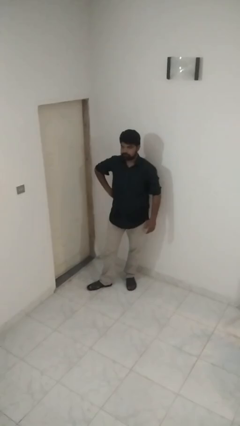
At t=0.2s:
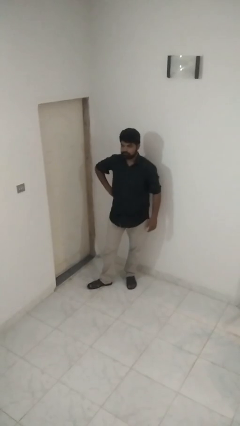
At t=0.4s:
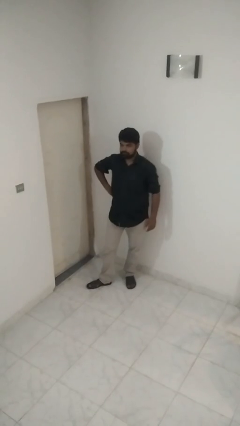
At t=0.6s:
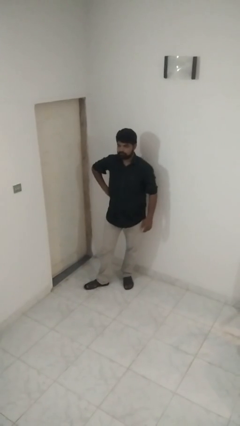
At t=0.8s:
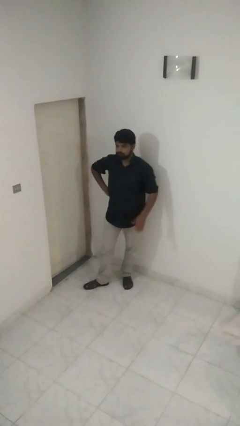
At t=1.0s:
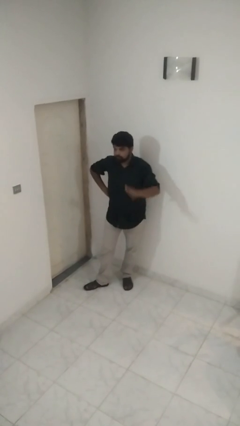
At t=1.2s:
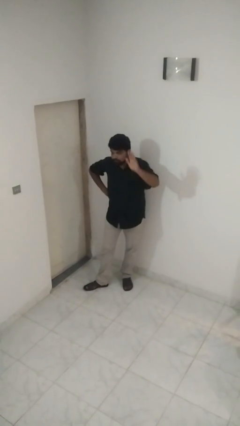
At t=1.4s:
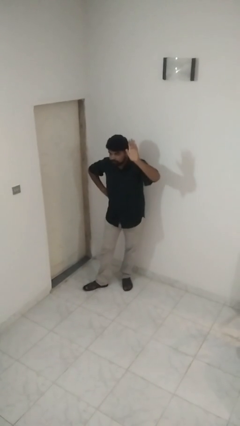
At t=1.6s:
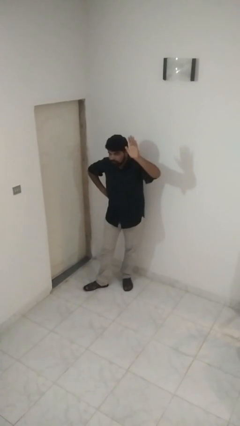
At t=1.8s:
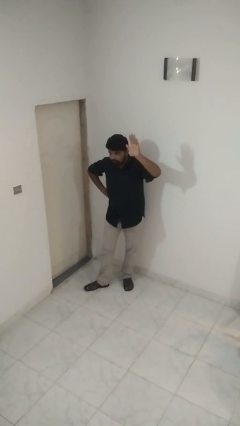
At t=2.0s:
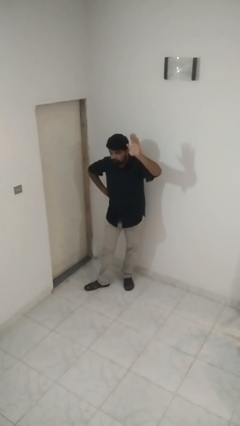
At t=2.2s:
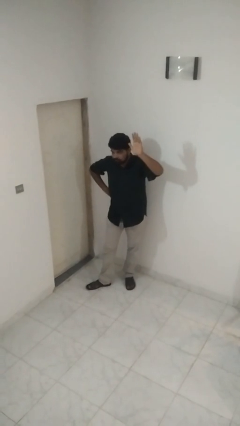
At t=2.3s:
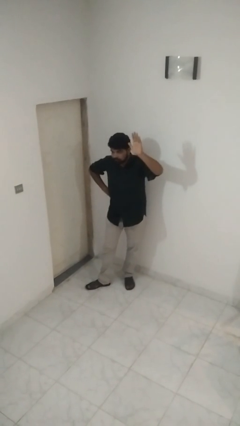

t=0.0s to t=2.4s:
person gestures raise hand

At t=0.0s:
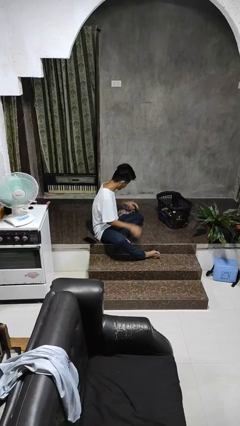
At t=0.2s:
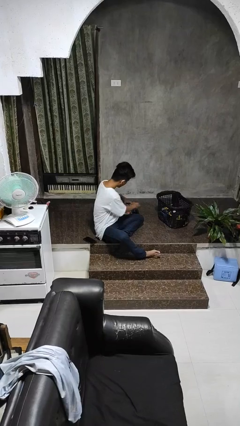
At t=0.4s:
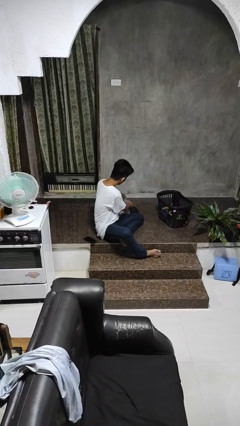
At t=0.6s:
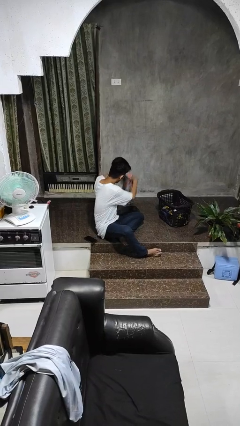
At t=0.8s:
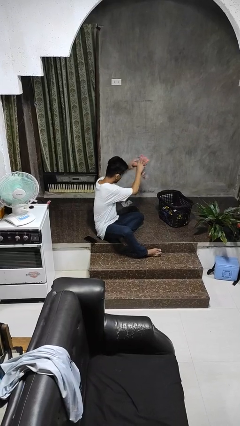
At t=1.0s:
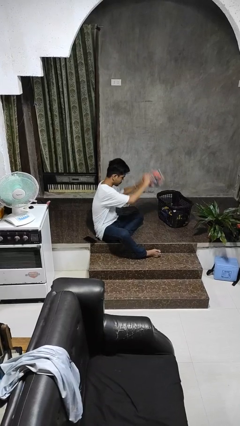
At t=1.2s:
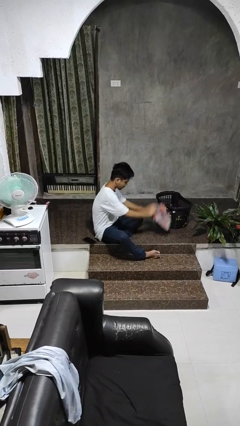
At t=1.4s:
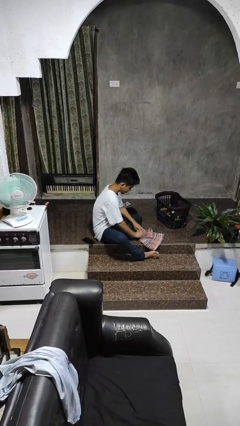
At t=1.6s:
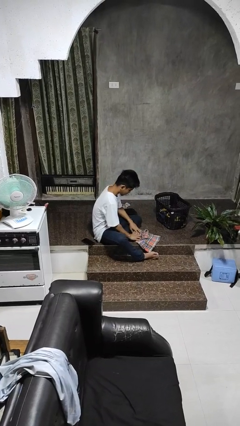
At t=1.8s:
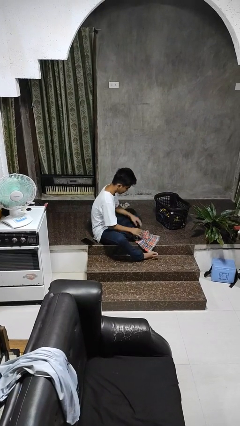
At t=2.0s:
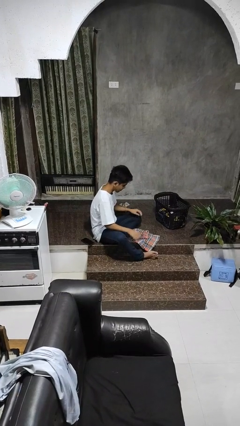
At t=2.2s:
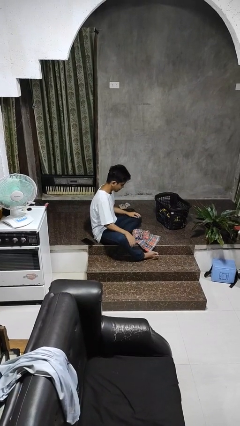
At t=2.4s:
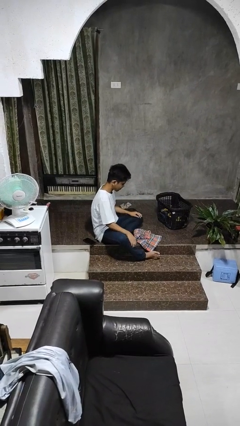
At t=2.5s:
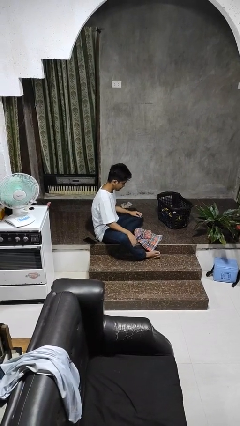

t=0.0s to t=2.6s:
person folds pants

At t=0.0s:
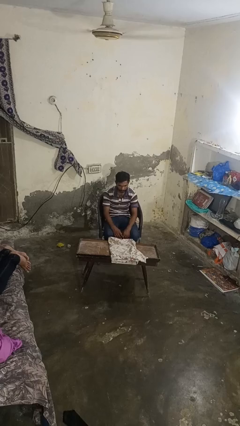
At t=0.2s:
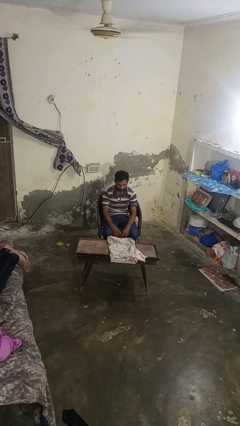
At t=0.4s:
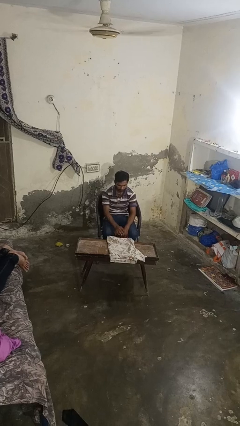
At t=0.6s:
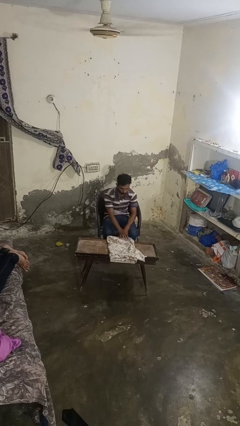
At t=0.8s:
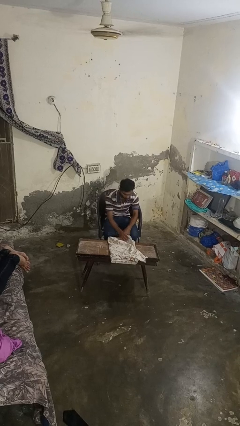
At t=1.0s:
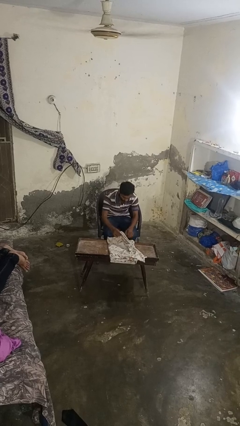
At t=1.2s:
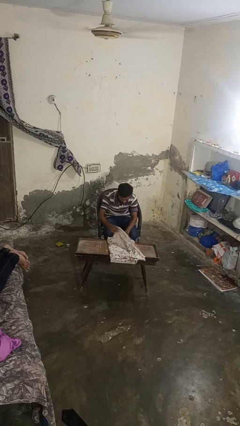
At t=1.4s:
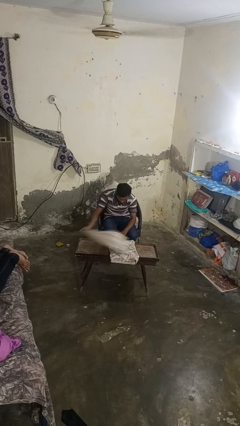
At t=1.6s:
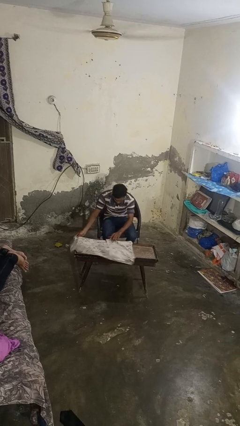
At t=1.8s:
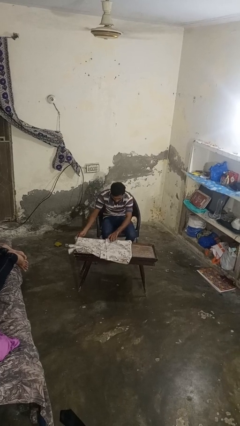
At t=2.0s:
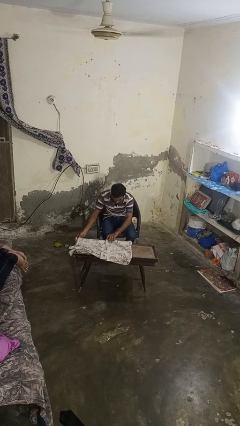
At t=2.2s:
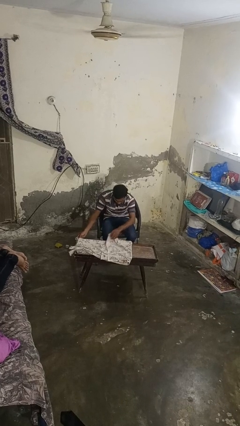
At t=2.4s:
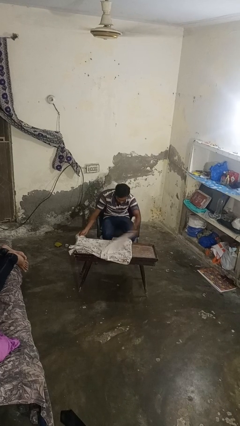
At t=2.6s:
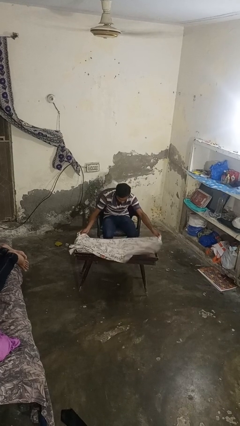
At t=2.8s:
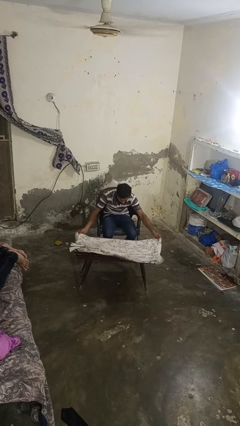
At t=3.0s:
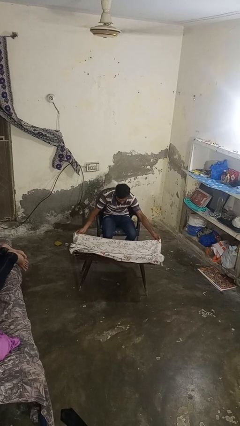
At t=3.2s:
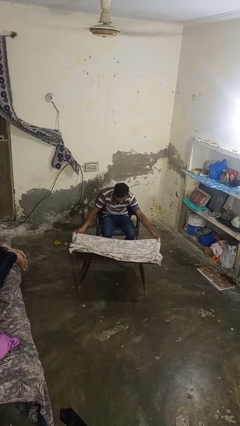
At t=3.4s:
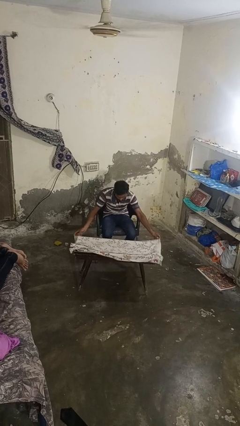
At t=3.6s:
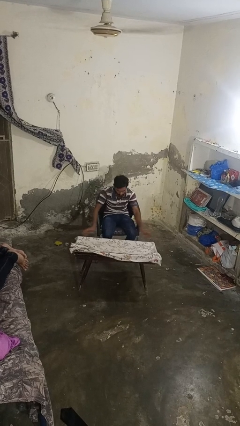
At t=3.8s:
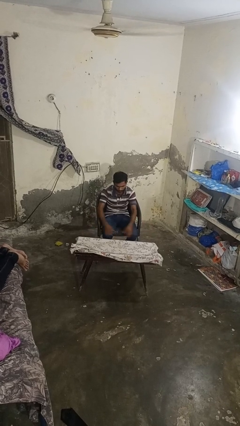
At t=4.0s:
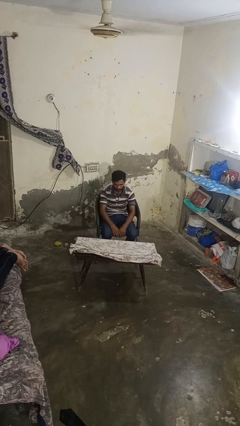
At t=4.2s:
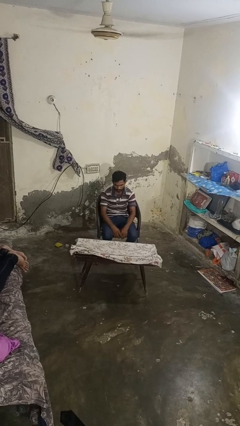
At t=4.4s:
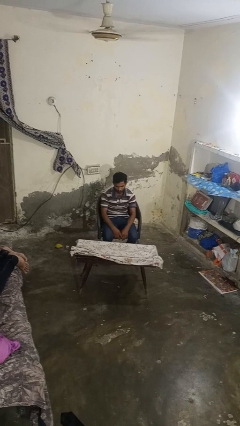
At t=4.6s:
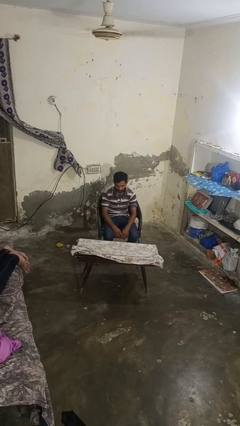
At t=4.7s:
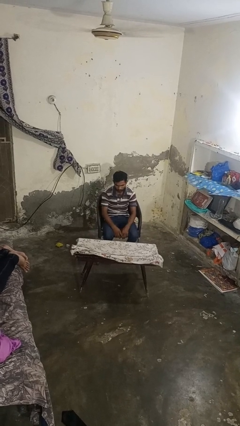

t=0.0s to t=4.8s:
person spreads tablecloth

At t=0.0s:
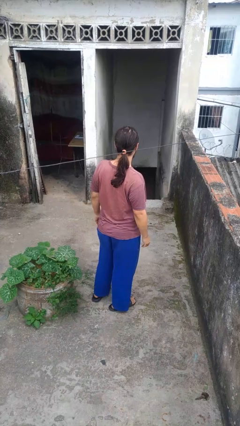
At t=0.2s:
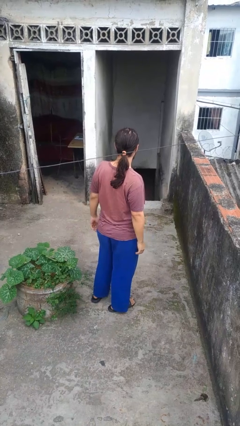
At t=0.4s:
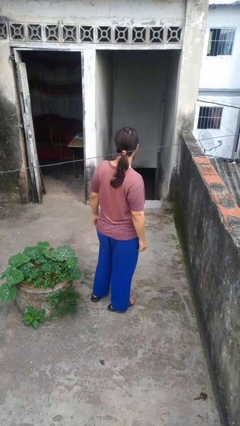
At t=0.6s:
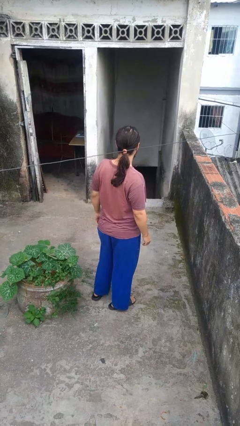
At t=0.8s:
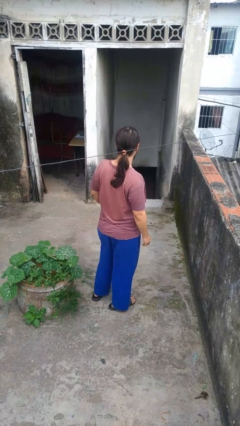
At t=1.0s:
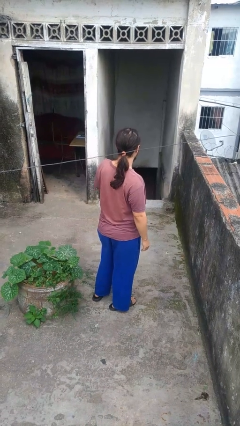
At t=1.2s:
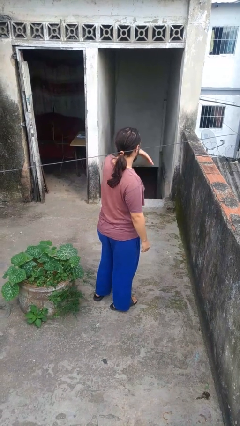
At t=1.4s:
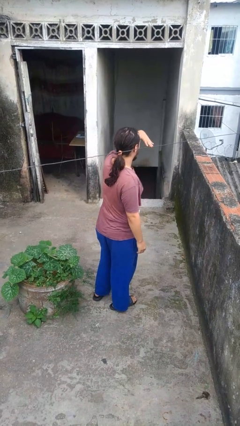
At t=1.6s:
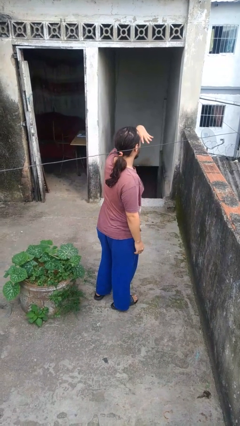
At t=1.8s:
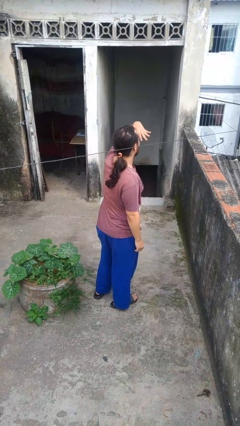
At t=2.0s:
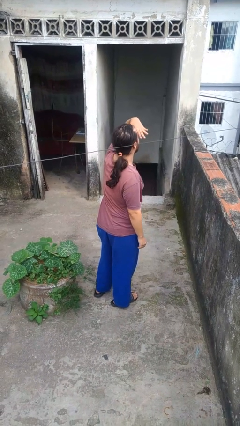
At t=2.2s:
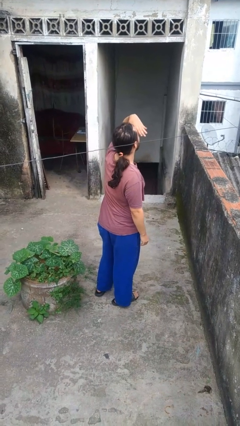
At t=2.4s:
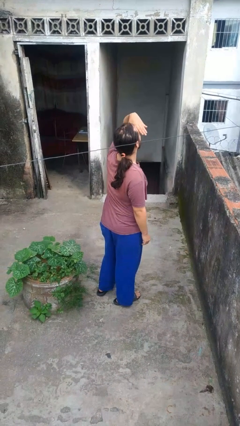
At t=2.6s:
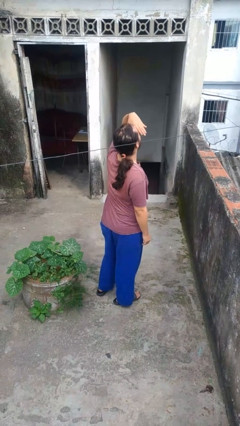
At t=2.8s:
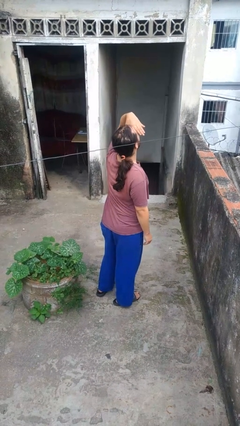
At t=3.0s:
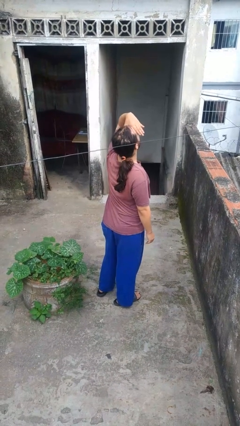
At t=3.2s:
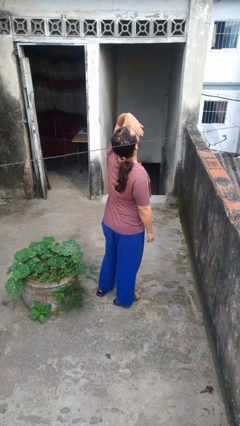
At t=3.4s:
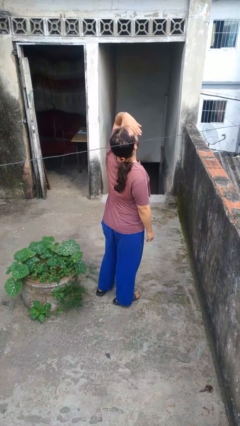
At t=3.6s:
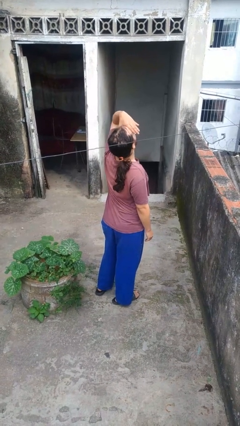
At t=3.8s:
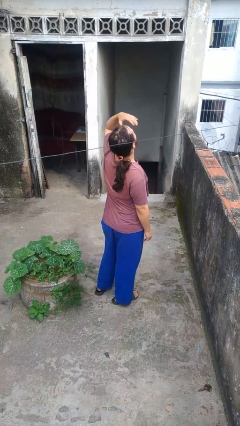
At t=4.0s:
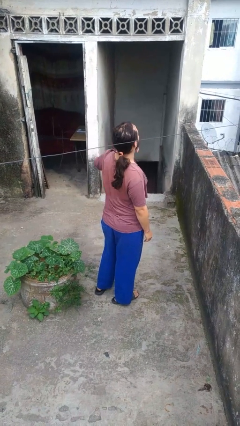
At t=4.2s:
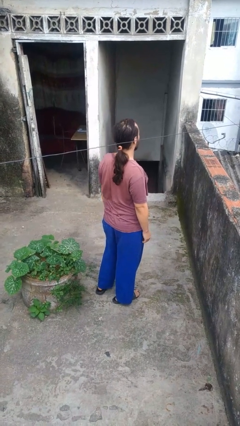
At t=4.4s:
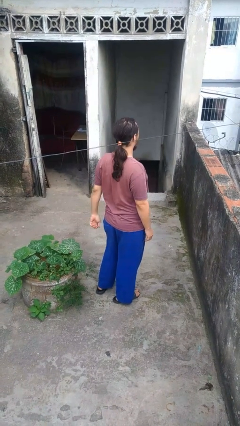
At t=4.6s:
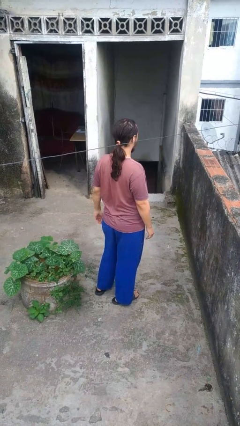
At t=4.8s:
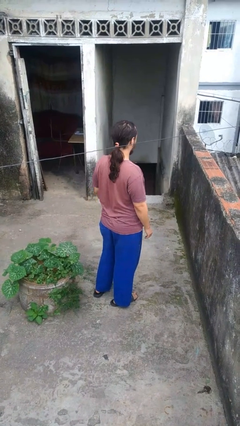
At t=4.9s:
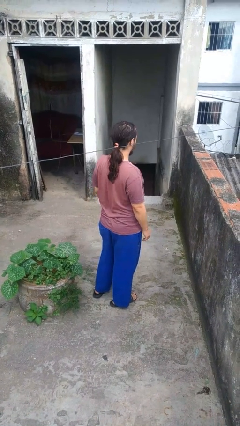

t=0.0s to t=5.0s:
person shades eyes

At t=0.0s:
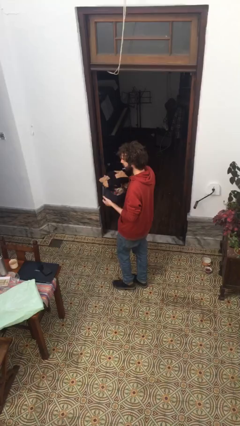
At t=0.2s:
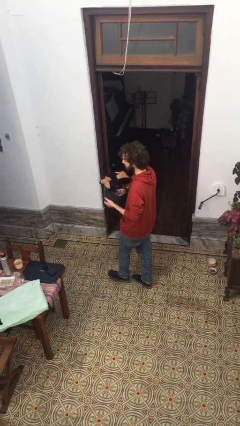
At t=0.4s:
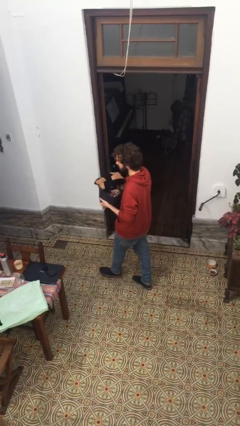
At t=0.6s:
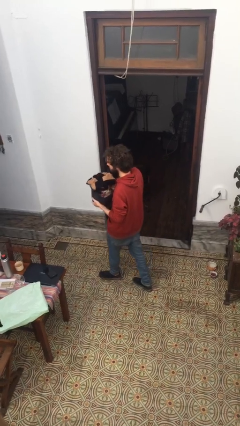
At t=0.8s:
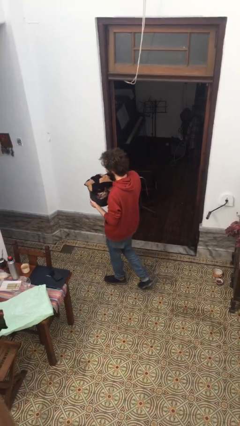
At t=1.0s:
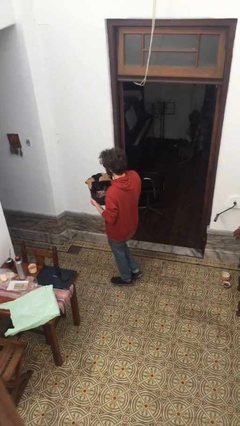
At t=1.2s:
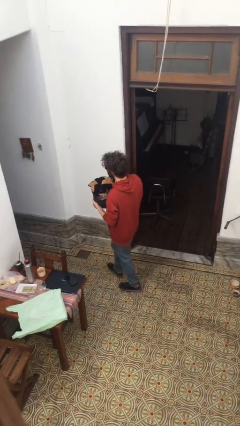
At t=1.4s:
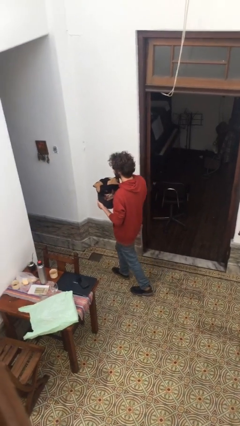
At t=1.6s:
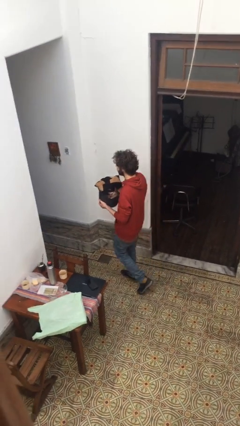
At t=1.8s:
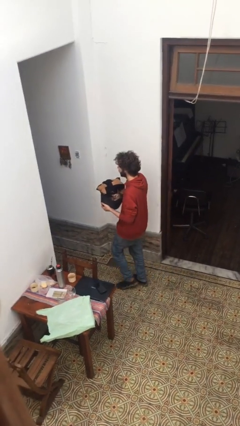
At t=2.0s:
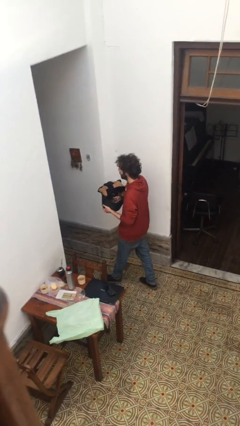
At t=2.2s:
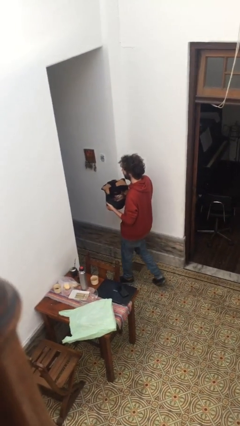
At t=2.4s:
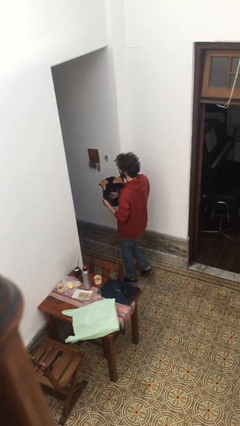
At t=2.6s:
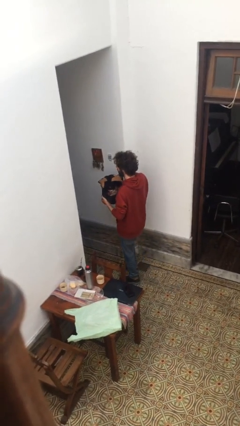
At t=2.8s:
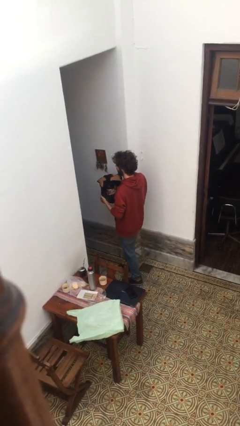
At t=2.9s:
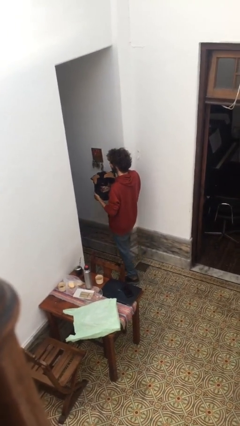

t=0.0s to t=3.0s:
person carries laundry basket
